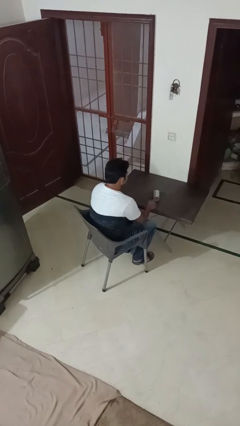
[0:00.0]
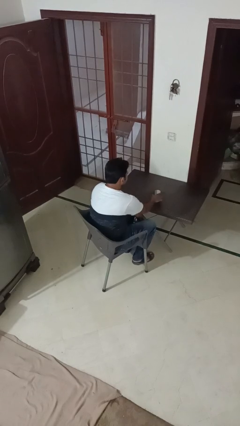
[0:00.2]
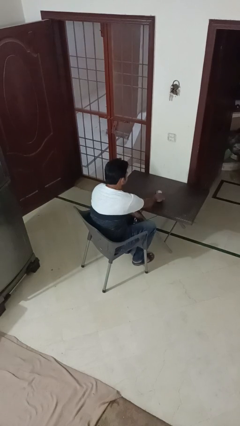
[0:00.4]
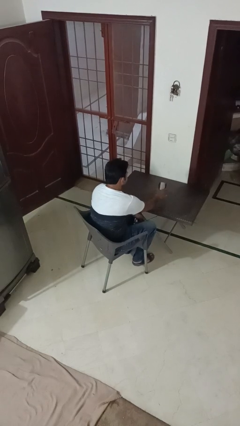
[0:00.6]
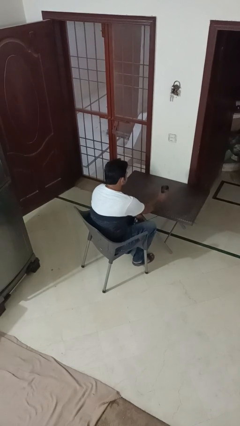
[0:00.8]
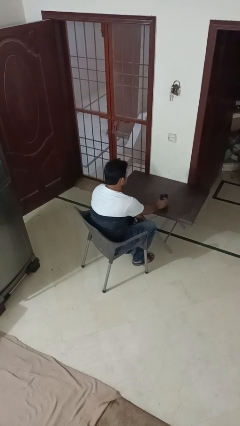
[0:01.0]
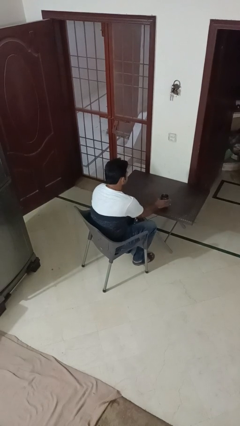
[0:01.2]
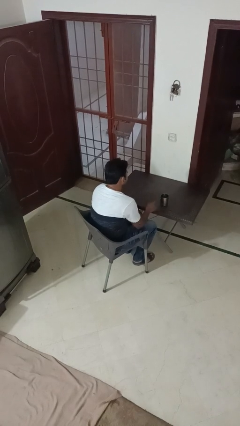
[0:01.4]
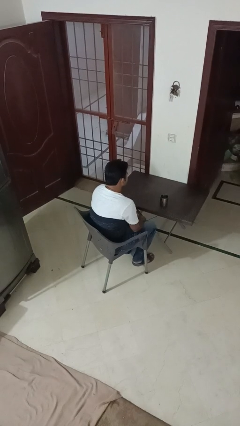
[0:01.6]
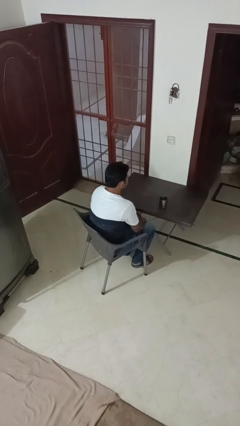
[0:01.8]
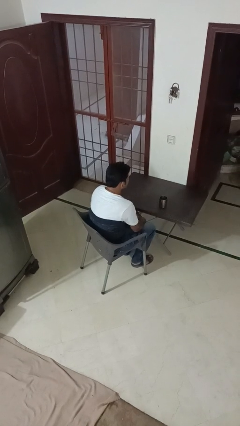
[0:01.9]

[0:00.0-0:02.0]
person sets upright glass

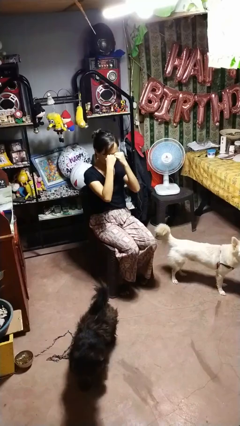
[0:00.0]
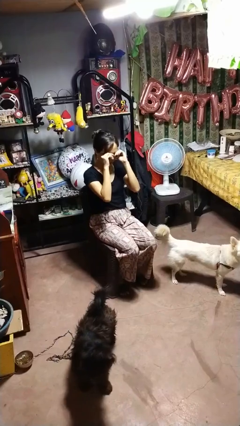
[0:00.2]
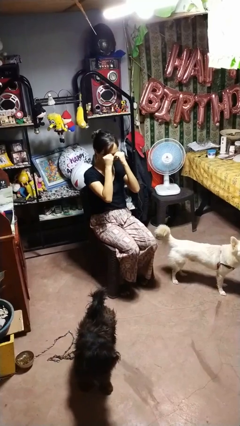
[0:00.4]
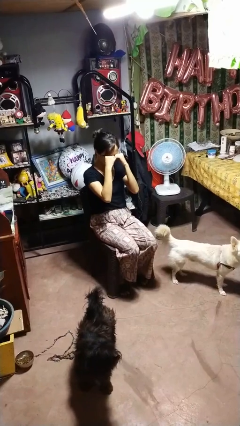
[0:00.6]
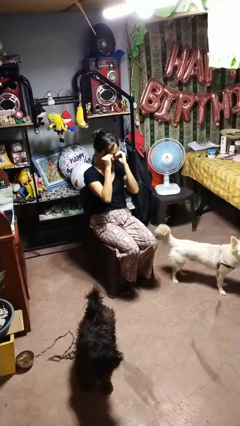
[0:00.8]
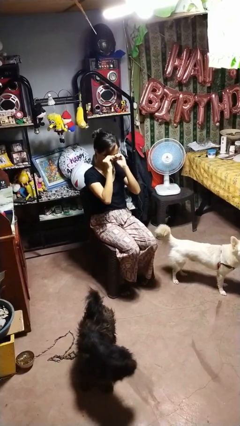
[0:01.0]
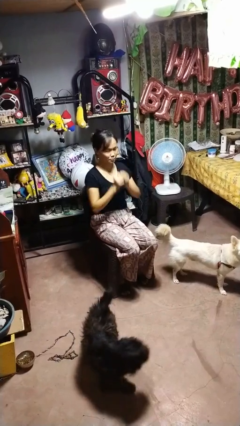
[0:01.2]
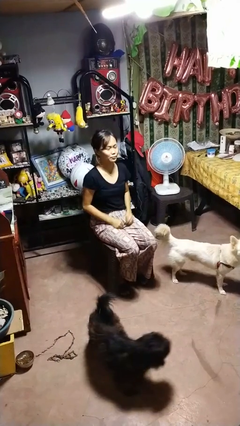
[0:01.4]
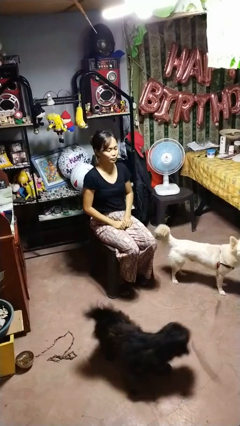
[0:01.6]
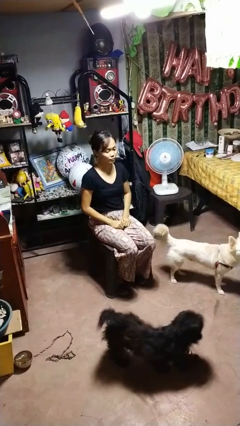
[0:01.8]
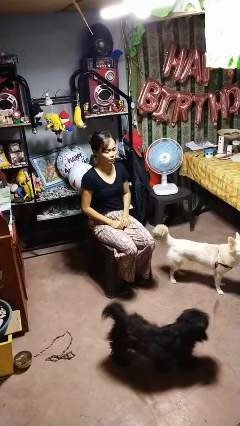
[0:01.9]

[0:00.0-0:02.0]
person rubs eyes

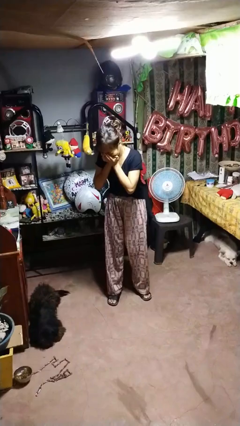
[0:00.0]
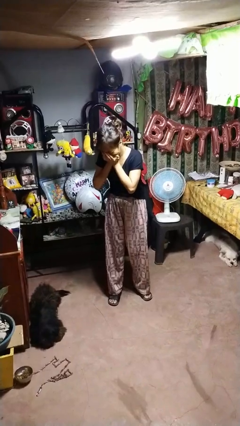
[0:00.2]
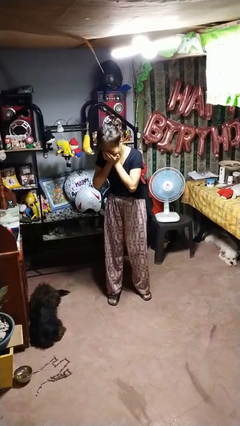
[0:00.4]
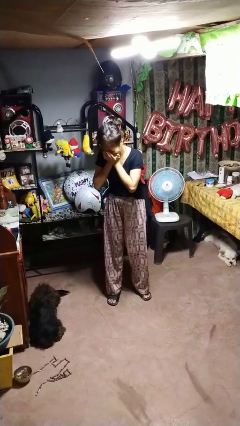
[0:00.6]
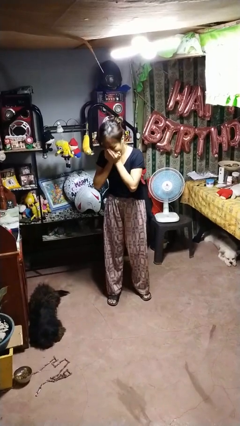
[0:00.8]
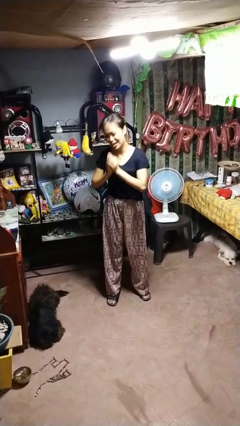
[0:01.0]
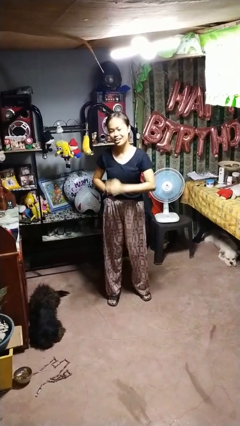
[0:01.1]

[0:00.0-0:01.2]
person sneezes into hand

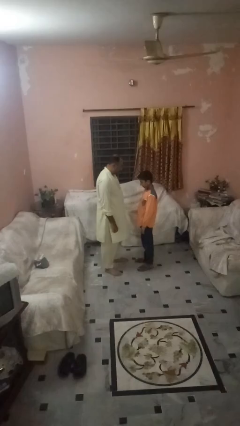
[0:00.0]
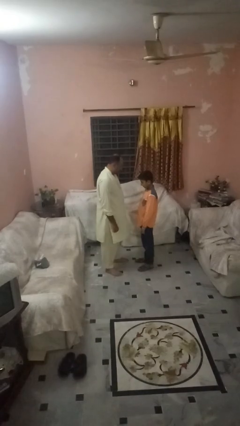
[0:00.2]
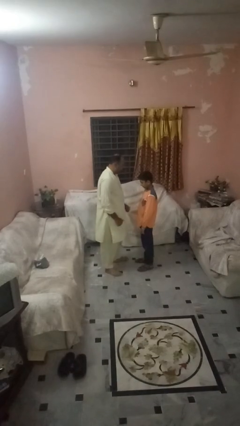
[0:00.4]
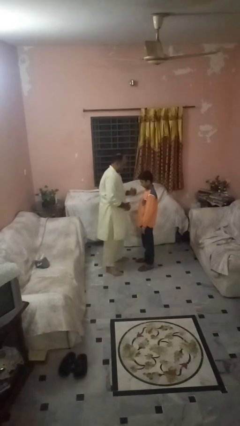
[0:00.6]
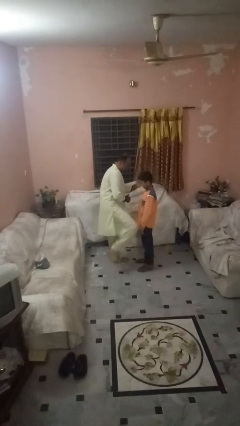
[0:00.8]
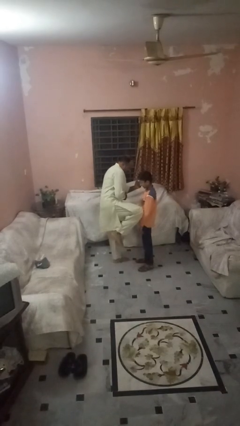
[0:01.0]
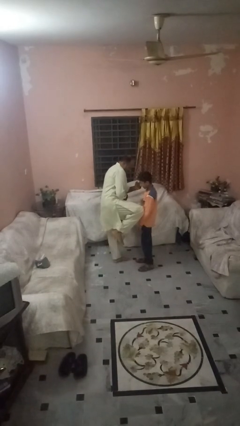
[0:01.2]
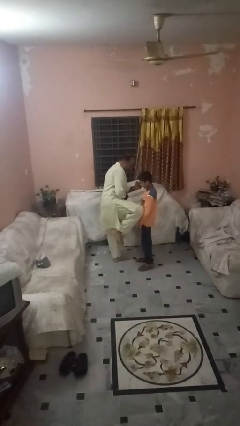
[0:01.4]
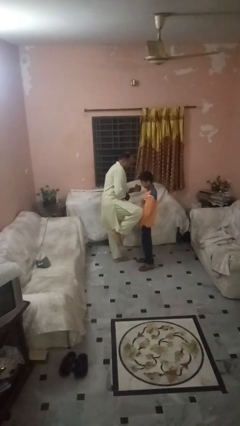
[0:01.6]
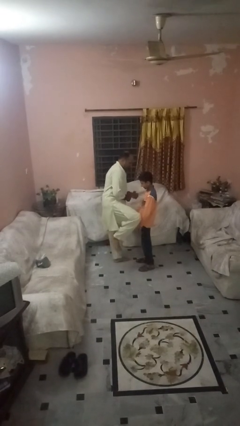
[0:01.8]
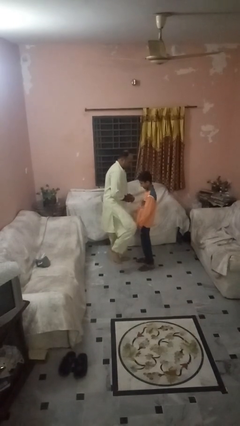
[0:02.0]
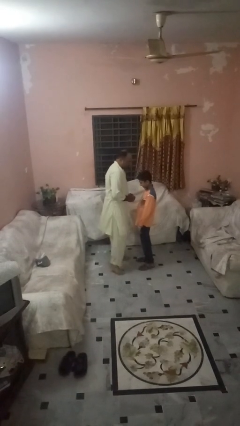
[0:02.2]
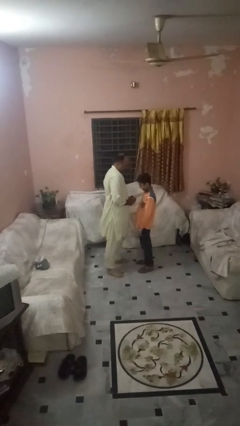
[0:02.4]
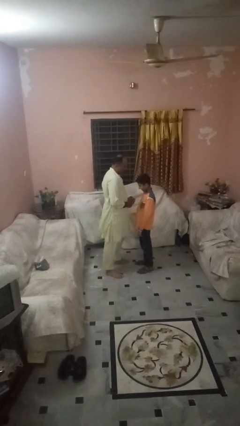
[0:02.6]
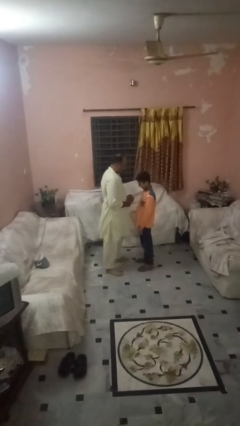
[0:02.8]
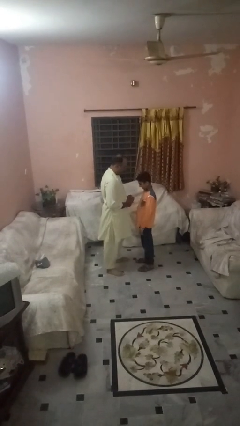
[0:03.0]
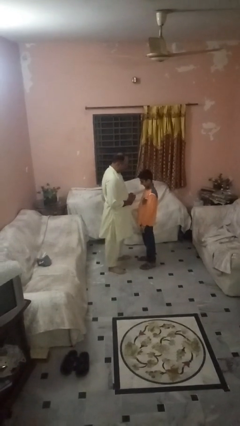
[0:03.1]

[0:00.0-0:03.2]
person kicks object to person

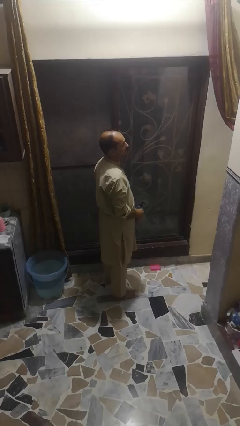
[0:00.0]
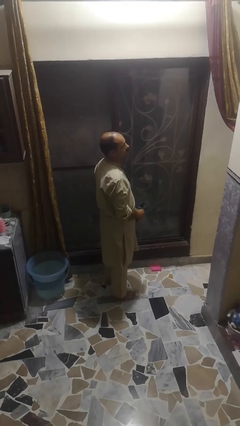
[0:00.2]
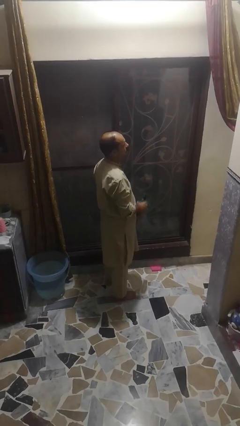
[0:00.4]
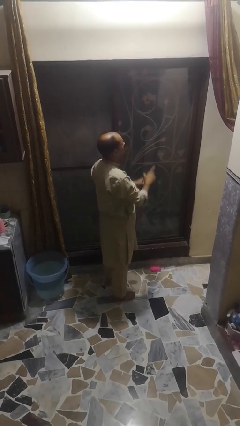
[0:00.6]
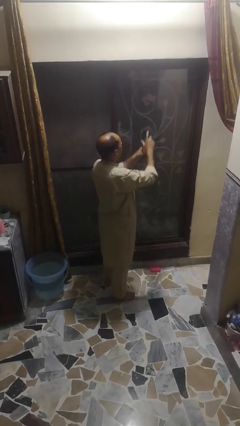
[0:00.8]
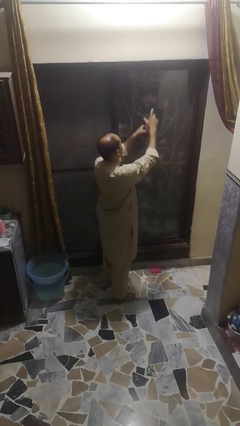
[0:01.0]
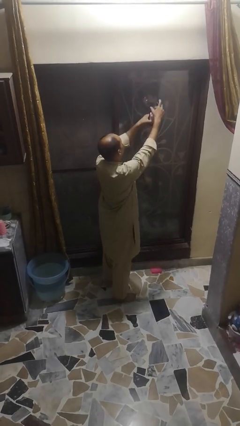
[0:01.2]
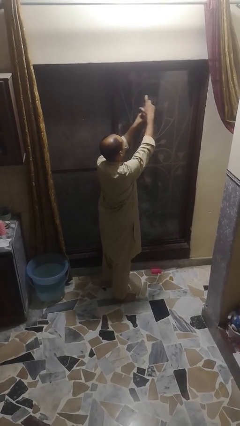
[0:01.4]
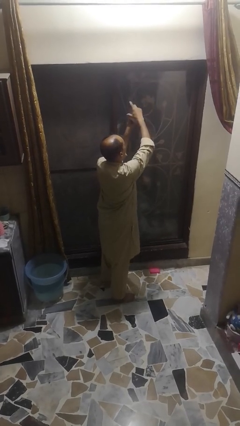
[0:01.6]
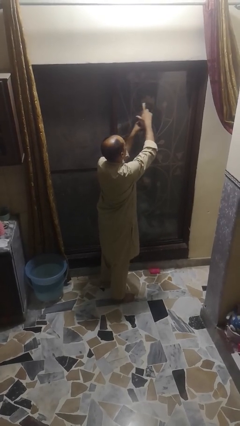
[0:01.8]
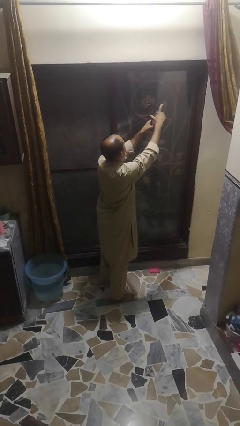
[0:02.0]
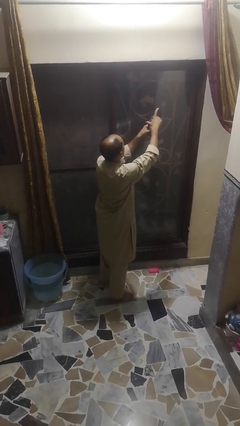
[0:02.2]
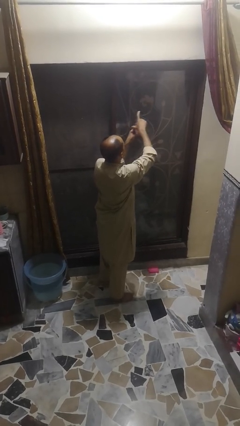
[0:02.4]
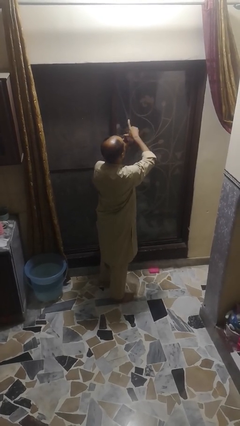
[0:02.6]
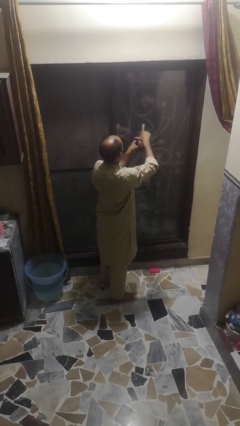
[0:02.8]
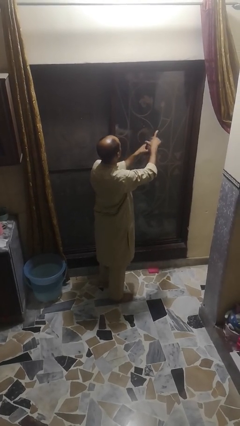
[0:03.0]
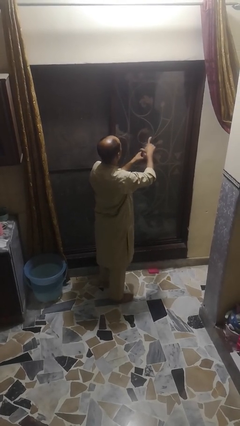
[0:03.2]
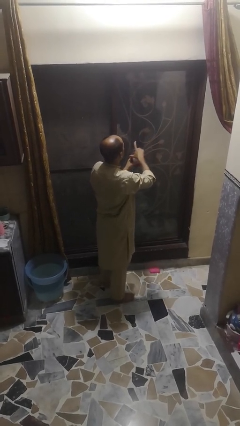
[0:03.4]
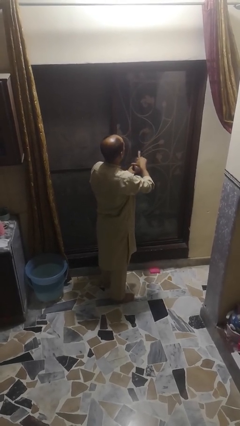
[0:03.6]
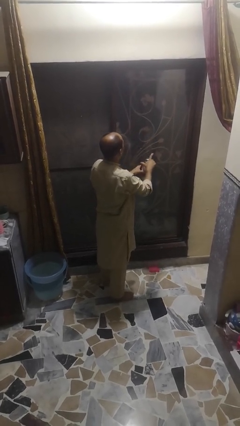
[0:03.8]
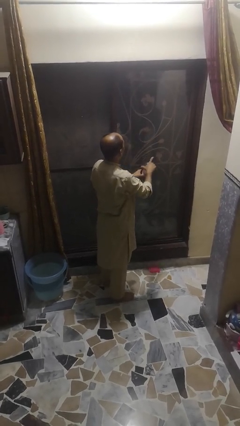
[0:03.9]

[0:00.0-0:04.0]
person sprays from bottle

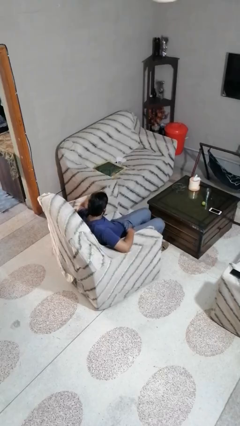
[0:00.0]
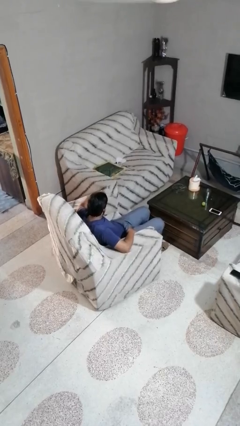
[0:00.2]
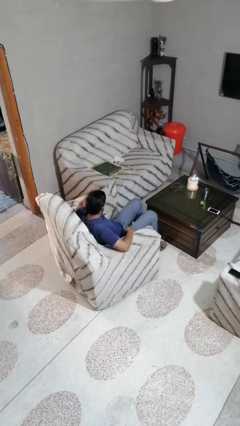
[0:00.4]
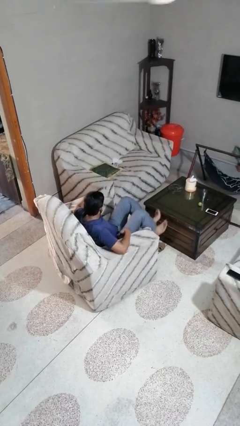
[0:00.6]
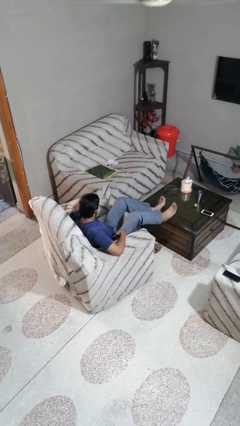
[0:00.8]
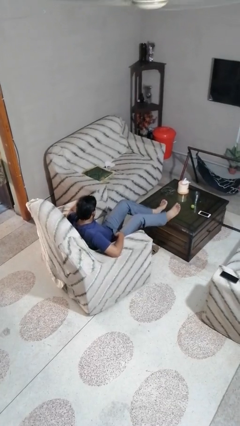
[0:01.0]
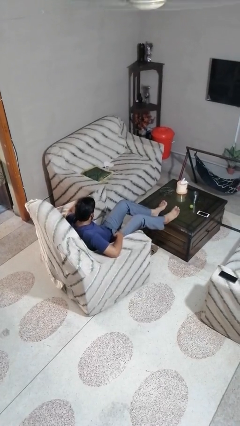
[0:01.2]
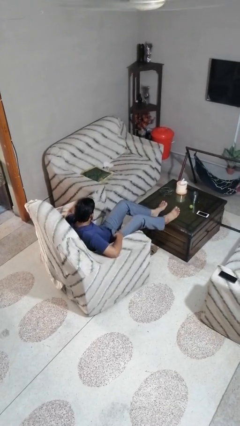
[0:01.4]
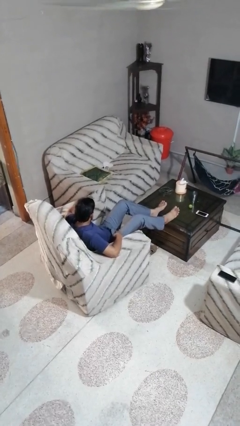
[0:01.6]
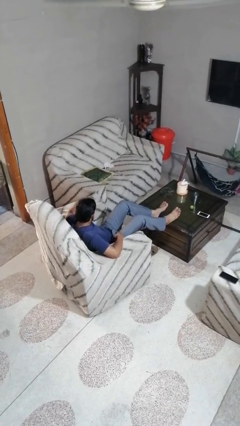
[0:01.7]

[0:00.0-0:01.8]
person puts feet up

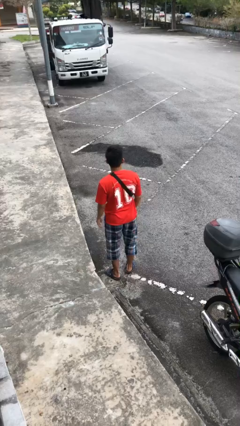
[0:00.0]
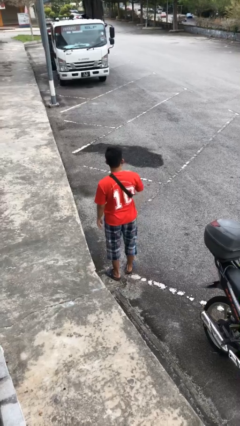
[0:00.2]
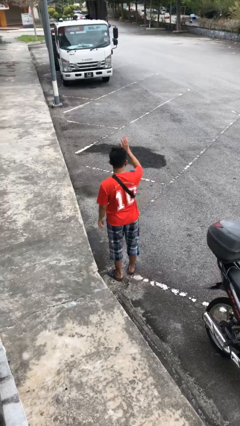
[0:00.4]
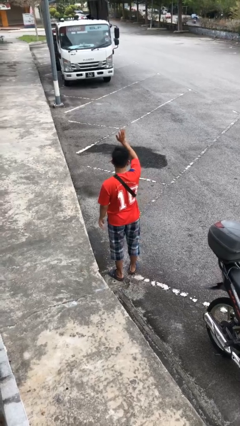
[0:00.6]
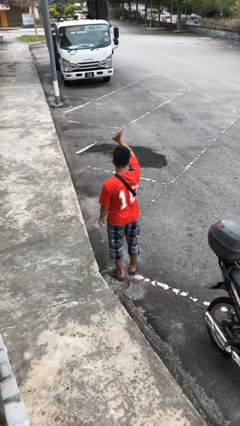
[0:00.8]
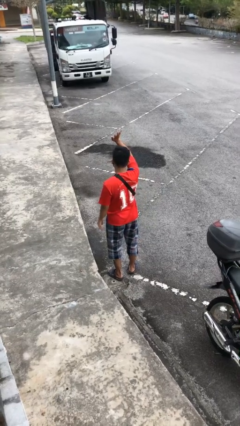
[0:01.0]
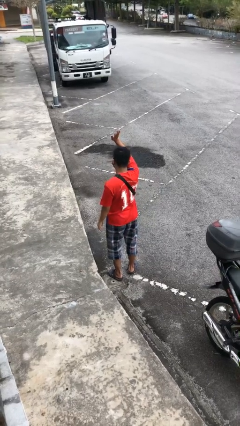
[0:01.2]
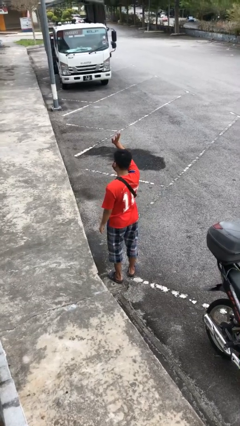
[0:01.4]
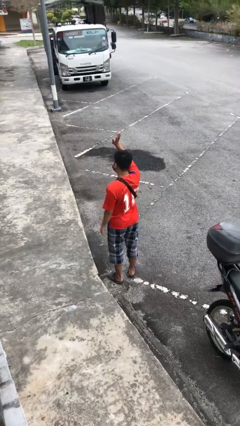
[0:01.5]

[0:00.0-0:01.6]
person gestures raise hand

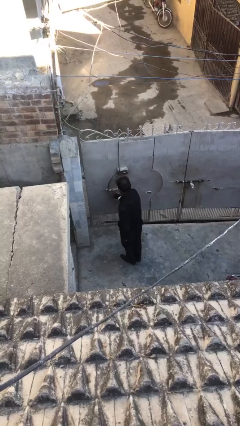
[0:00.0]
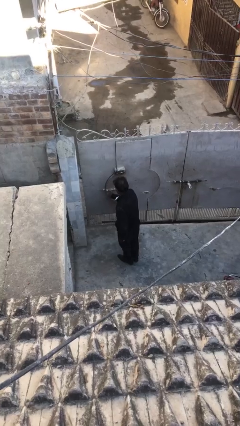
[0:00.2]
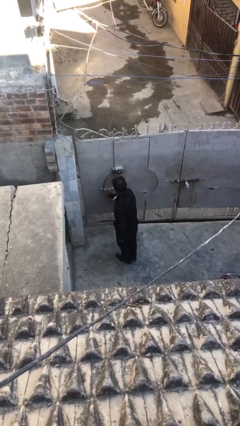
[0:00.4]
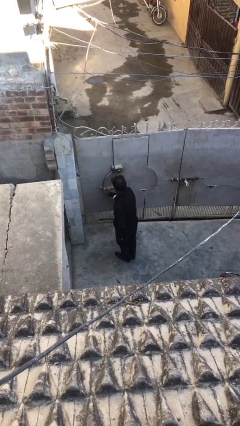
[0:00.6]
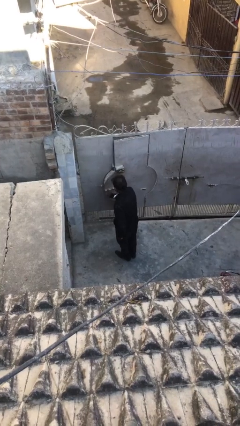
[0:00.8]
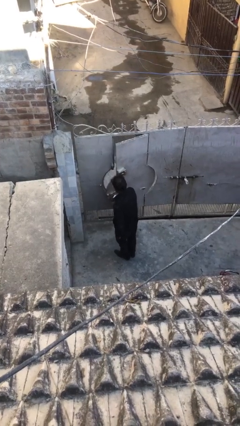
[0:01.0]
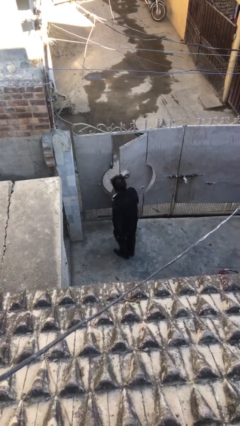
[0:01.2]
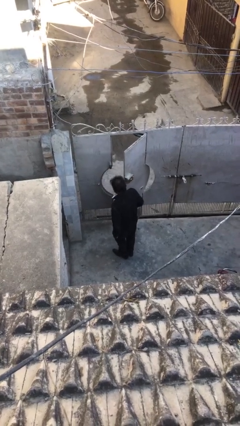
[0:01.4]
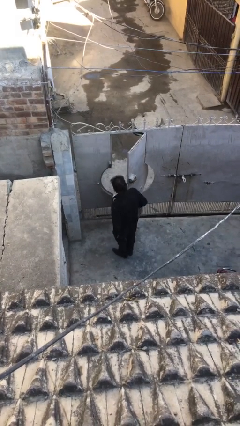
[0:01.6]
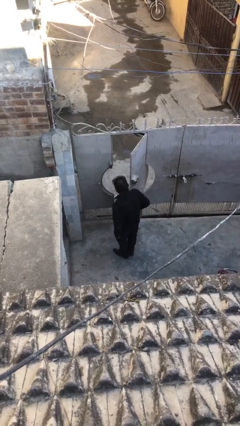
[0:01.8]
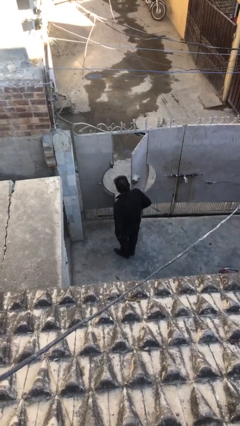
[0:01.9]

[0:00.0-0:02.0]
person opens facility door
